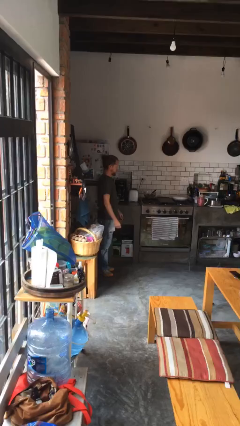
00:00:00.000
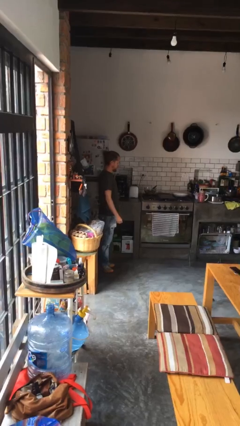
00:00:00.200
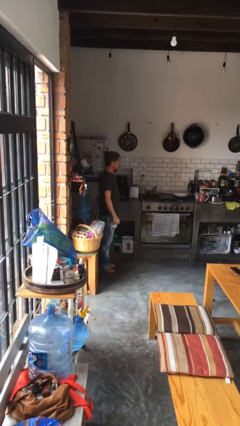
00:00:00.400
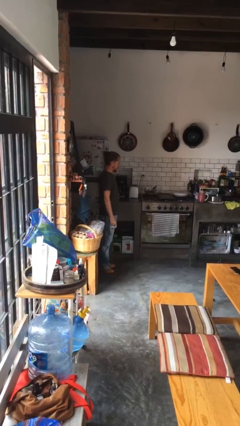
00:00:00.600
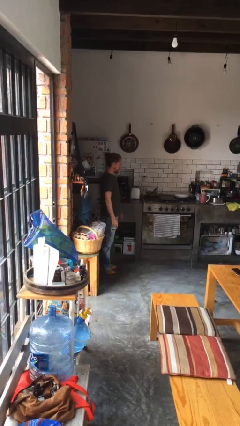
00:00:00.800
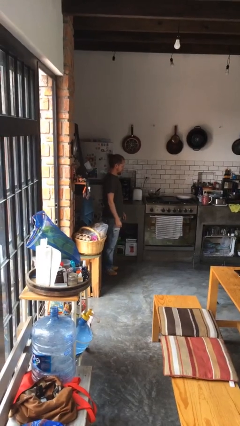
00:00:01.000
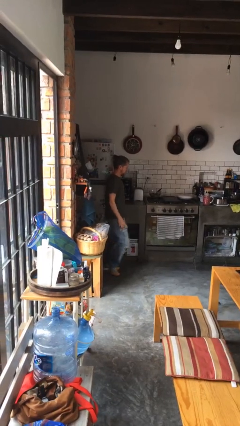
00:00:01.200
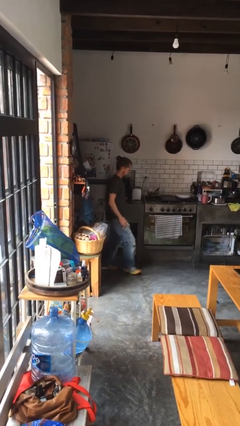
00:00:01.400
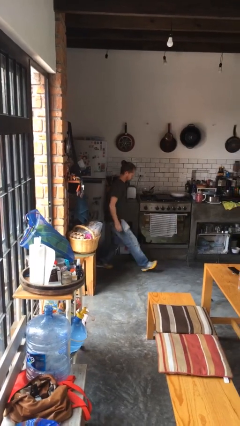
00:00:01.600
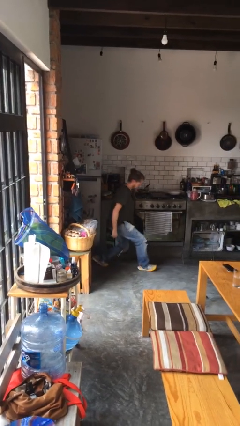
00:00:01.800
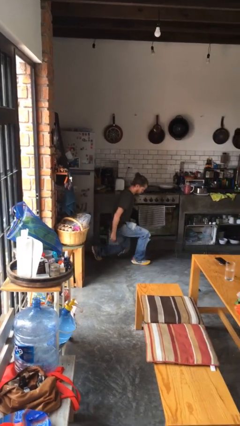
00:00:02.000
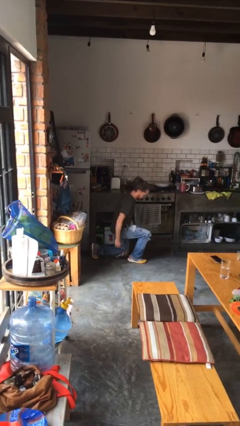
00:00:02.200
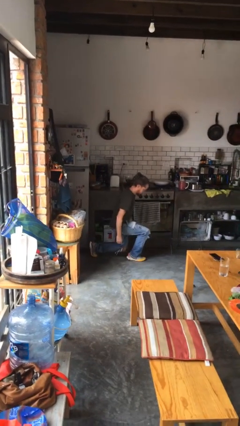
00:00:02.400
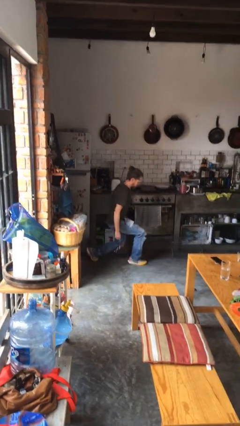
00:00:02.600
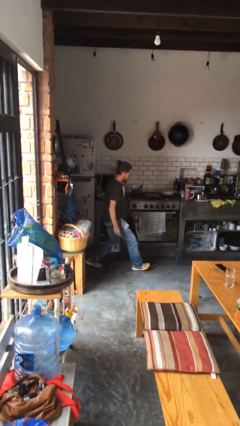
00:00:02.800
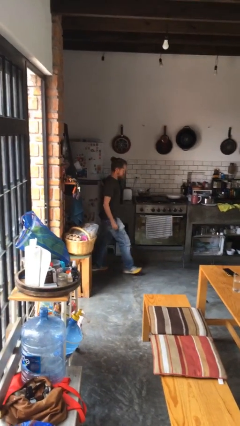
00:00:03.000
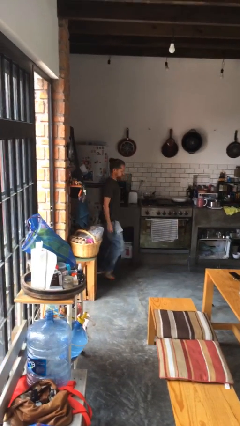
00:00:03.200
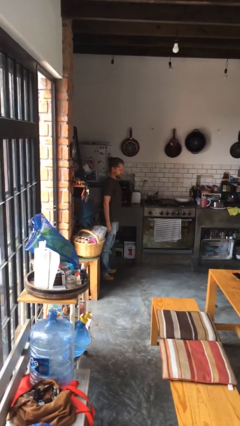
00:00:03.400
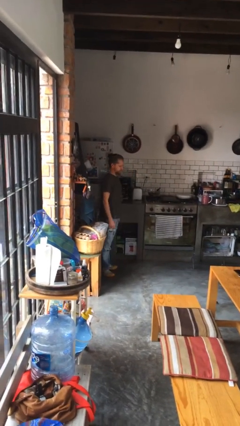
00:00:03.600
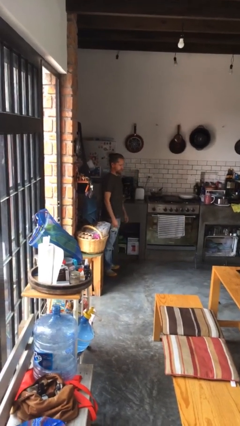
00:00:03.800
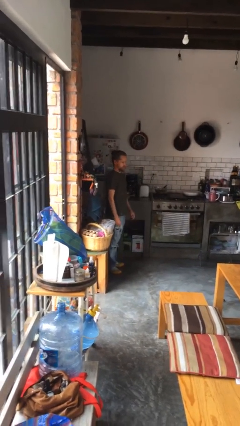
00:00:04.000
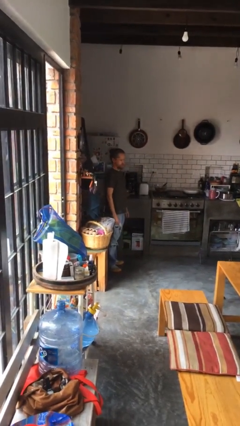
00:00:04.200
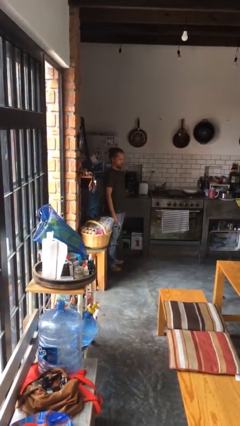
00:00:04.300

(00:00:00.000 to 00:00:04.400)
person exercises with lunges

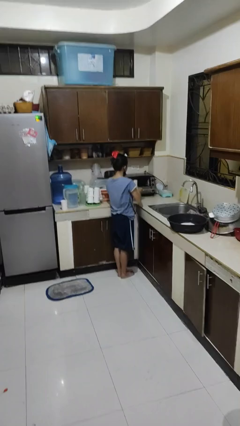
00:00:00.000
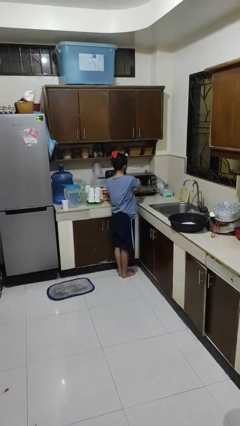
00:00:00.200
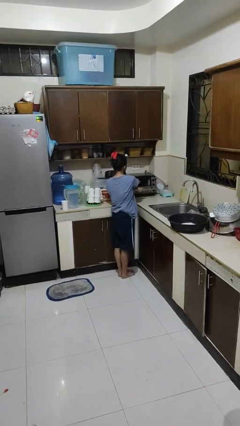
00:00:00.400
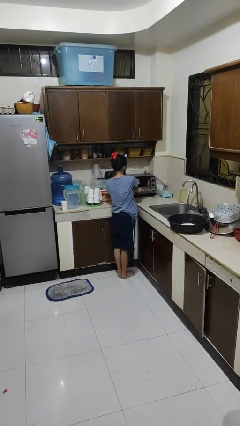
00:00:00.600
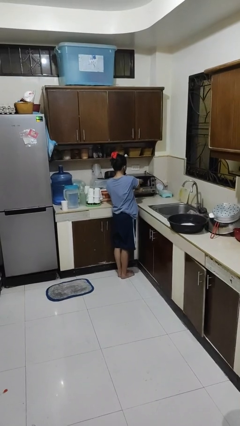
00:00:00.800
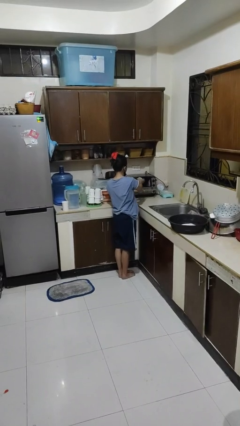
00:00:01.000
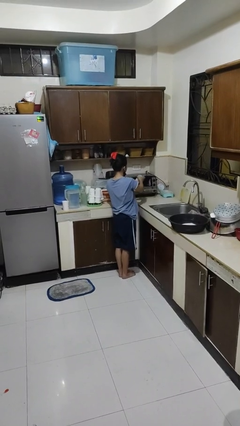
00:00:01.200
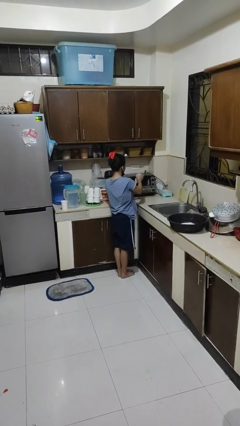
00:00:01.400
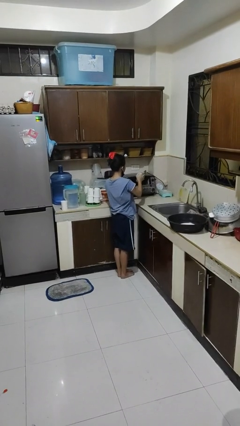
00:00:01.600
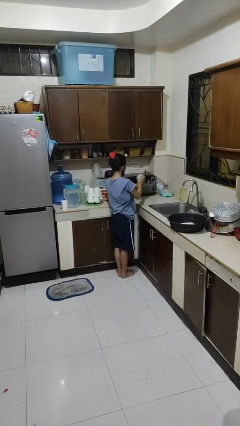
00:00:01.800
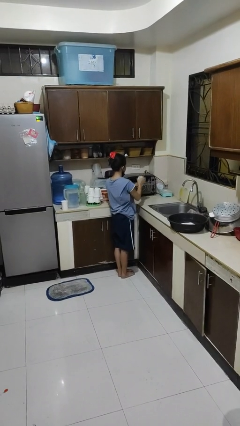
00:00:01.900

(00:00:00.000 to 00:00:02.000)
person takes object from microwave

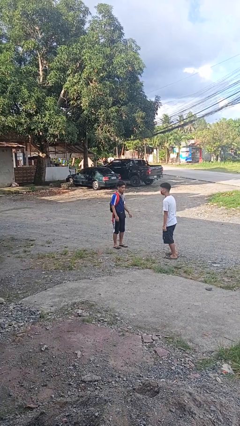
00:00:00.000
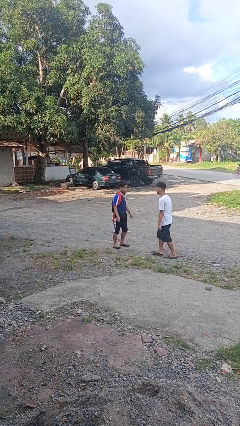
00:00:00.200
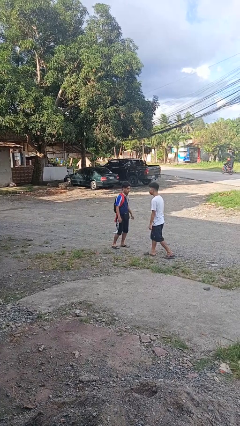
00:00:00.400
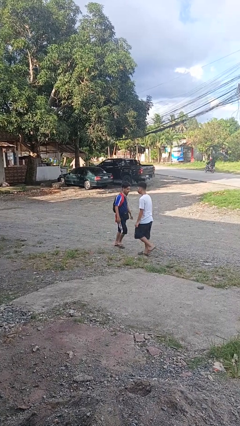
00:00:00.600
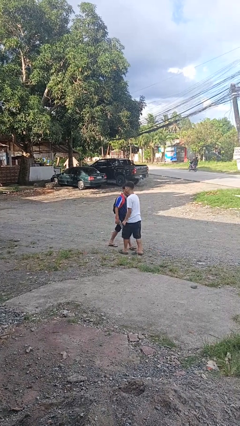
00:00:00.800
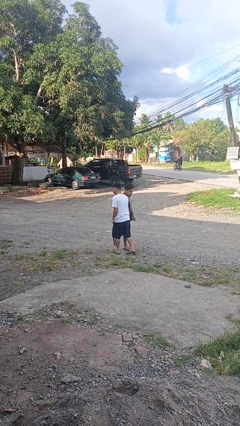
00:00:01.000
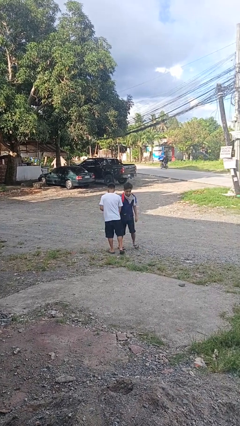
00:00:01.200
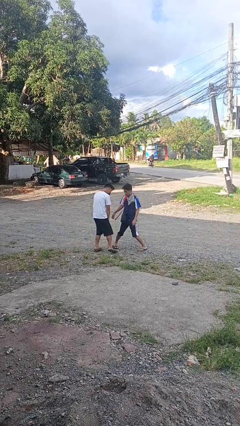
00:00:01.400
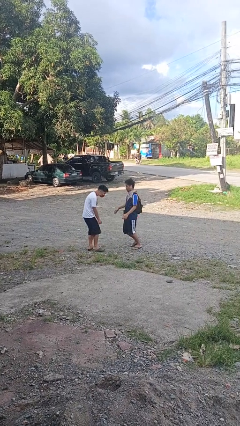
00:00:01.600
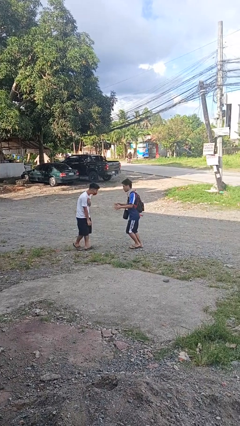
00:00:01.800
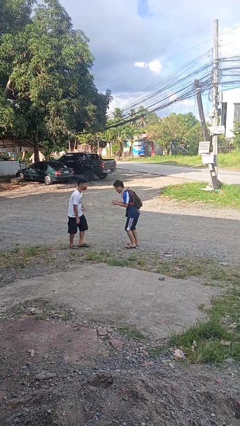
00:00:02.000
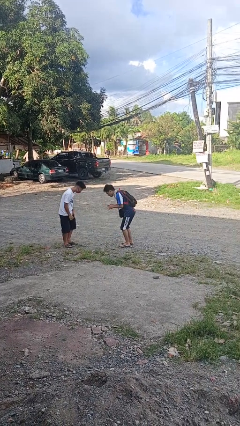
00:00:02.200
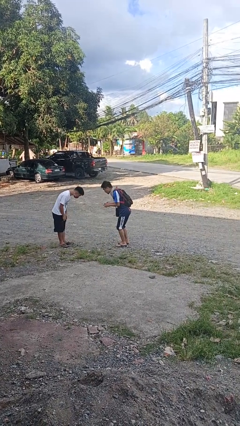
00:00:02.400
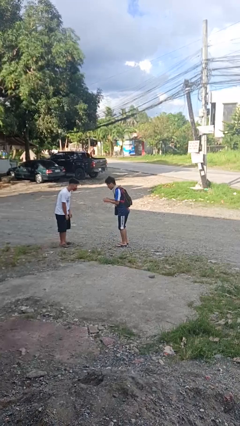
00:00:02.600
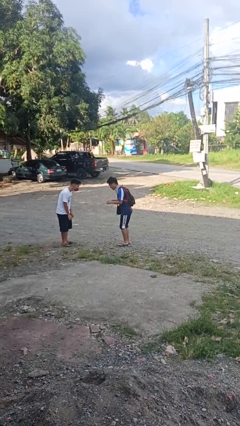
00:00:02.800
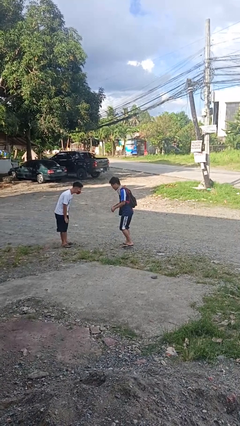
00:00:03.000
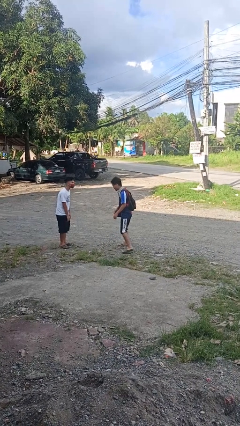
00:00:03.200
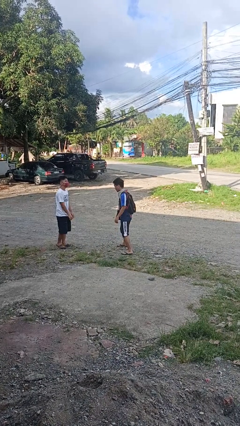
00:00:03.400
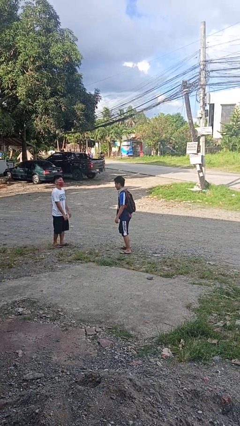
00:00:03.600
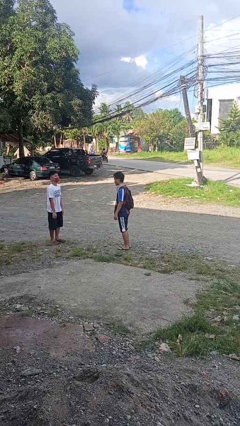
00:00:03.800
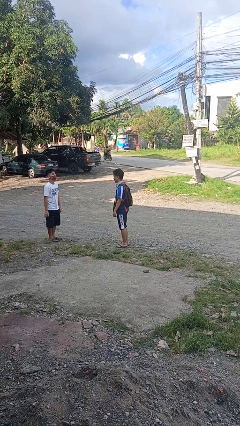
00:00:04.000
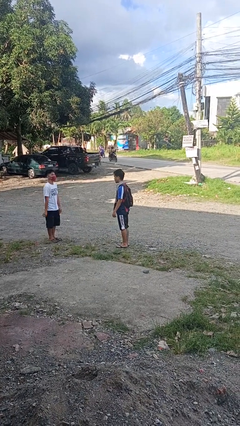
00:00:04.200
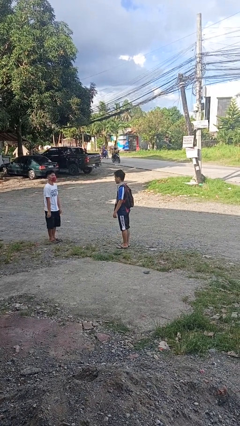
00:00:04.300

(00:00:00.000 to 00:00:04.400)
person bumps into person

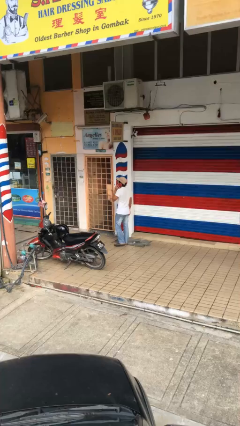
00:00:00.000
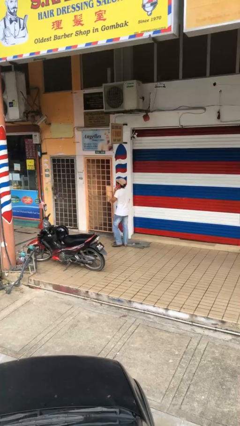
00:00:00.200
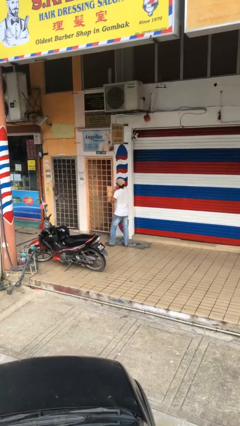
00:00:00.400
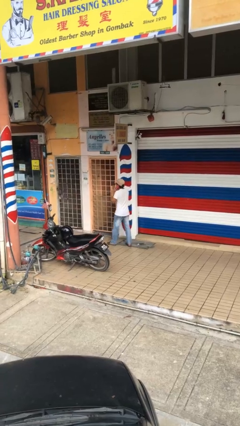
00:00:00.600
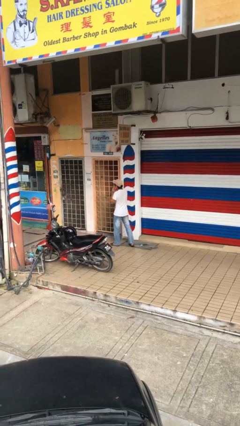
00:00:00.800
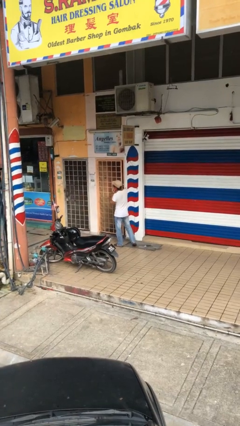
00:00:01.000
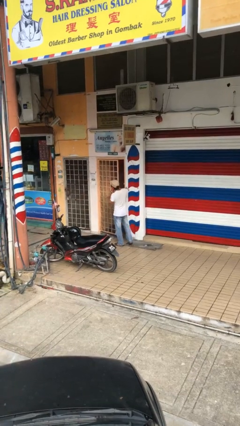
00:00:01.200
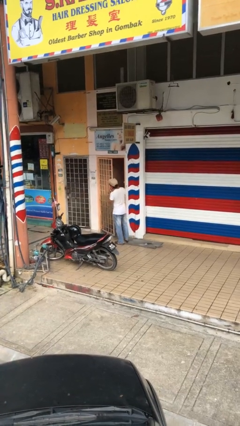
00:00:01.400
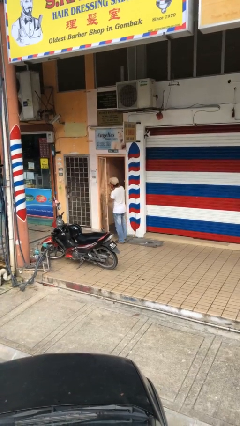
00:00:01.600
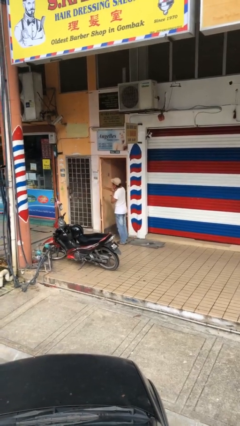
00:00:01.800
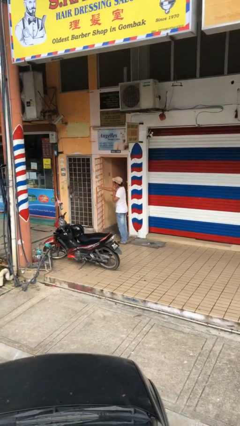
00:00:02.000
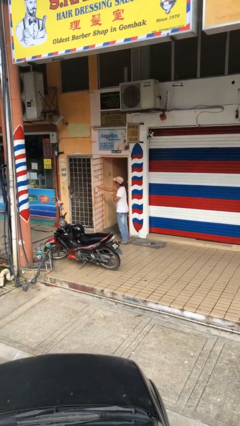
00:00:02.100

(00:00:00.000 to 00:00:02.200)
person opens facility door

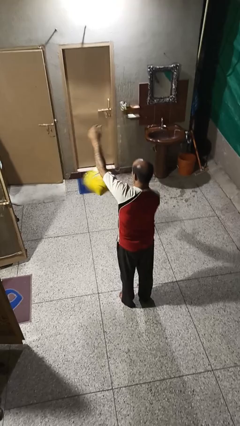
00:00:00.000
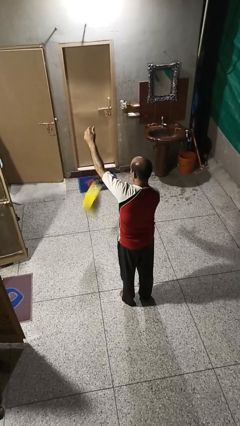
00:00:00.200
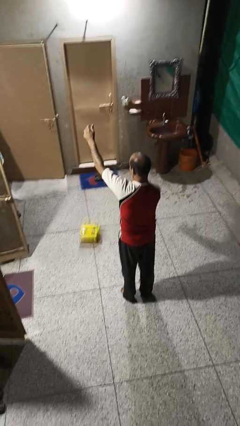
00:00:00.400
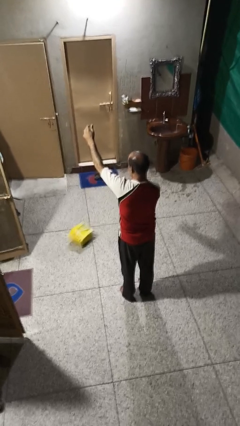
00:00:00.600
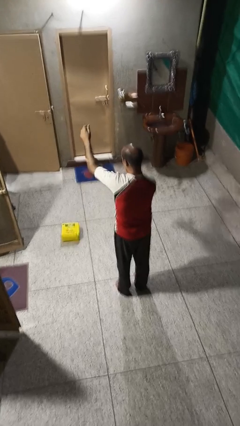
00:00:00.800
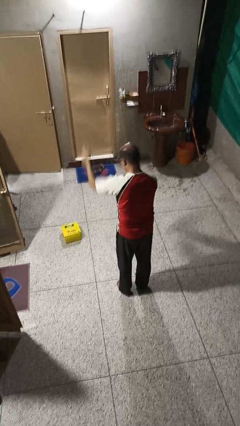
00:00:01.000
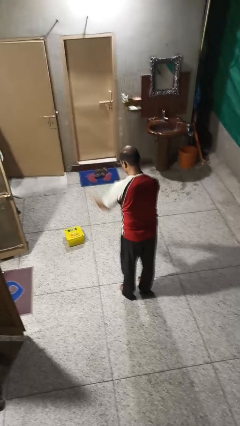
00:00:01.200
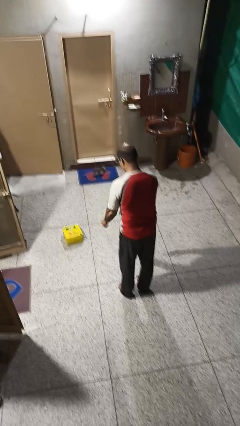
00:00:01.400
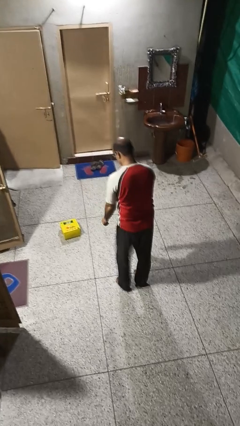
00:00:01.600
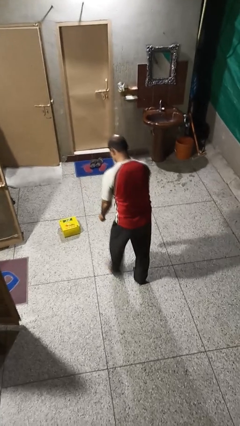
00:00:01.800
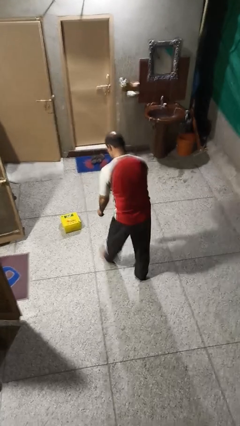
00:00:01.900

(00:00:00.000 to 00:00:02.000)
person catches dropped object

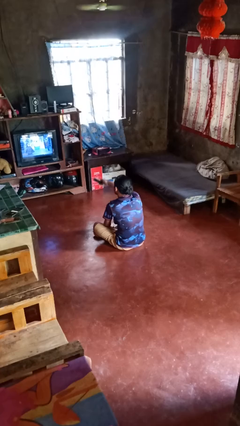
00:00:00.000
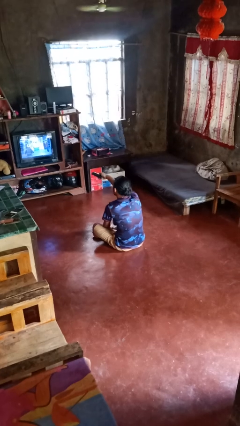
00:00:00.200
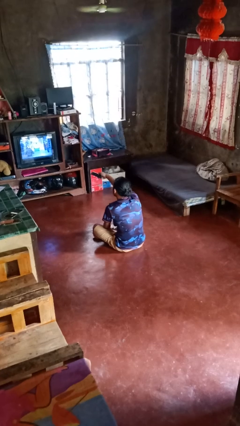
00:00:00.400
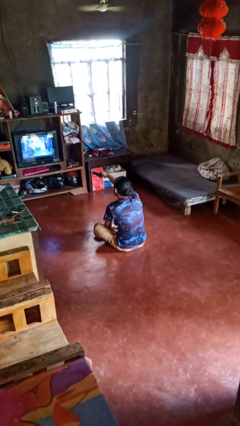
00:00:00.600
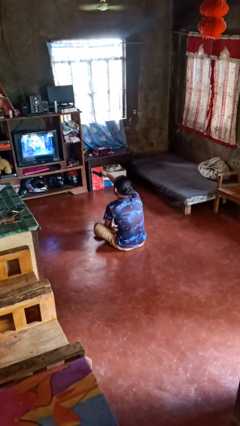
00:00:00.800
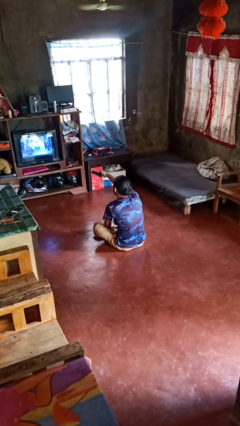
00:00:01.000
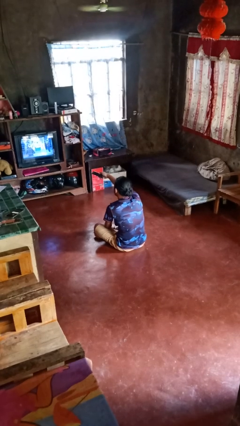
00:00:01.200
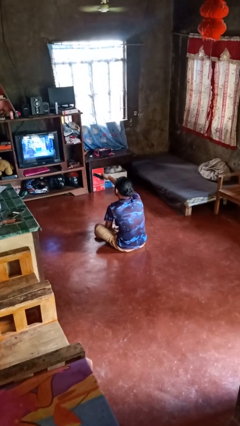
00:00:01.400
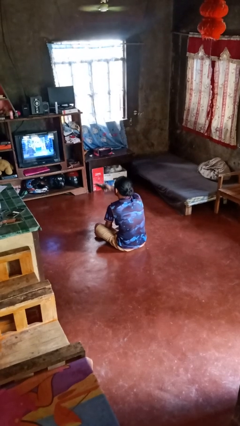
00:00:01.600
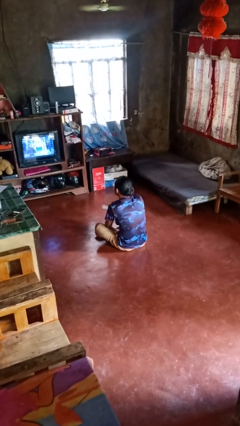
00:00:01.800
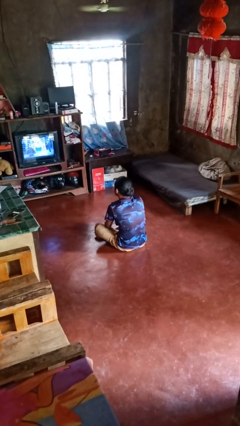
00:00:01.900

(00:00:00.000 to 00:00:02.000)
person uses television remote
